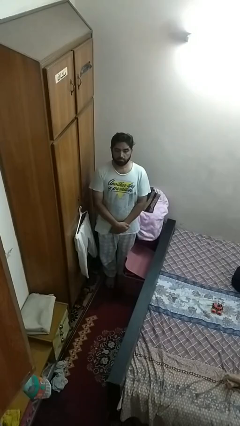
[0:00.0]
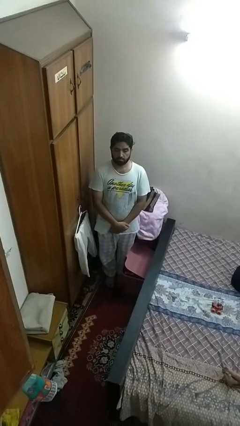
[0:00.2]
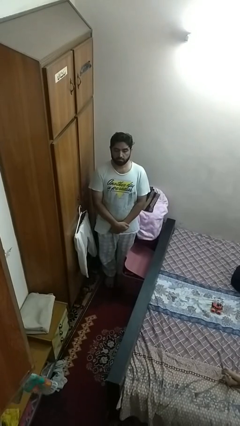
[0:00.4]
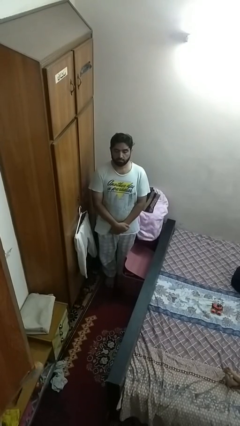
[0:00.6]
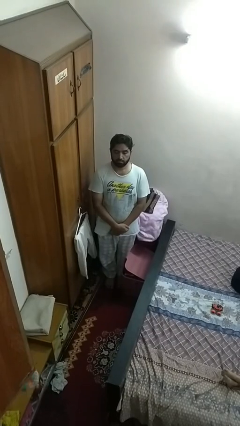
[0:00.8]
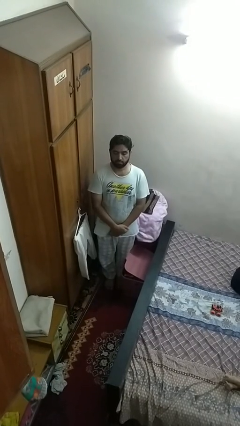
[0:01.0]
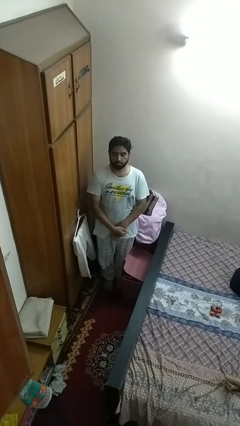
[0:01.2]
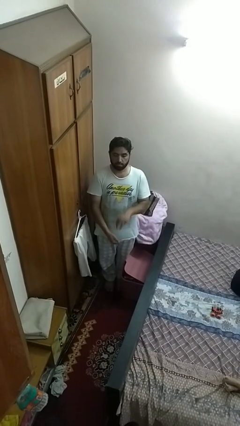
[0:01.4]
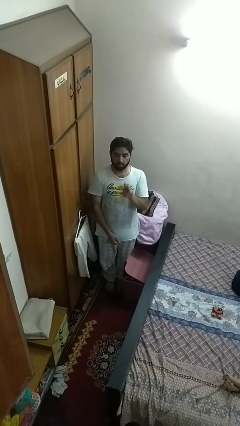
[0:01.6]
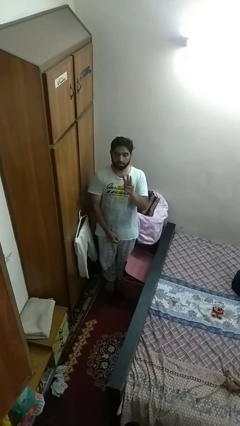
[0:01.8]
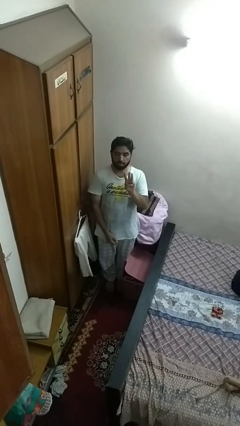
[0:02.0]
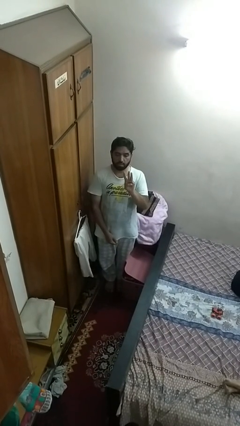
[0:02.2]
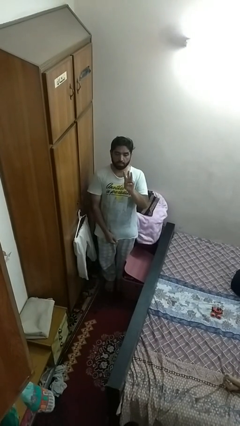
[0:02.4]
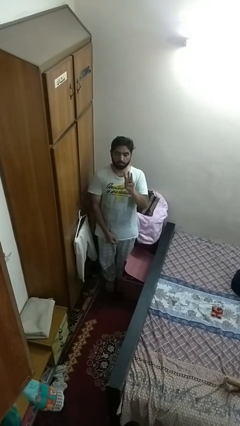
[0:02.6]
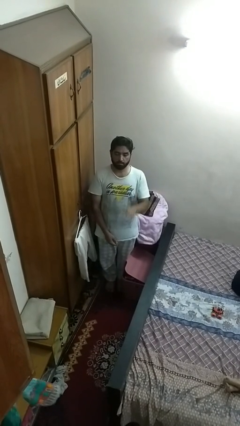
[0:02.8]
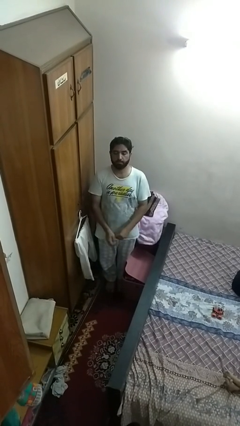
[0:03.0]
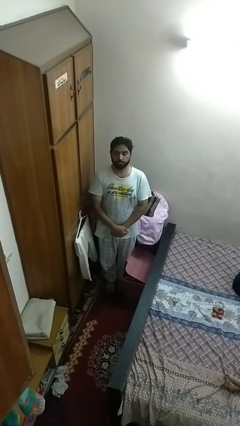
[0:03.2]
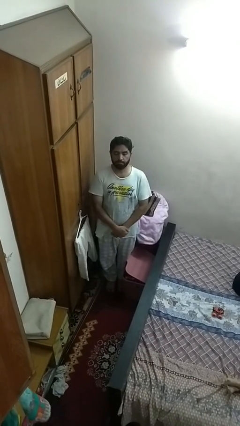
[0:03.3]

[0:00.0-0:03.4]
person gestures number three

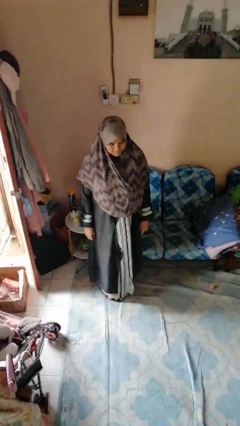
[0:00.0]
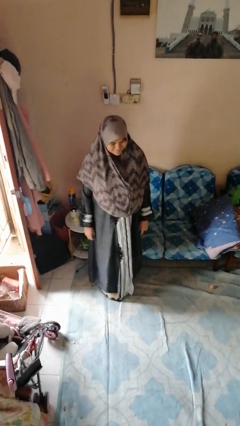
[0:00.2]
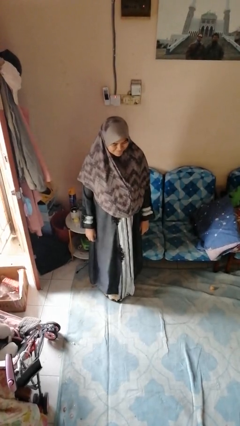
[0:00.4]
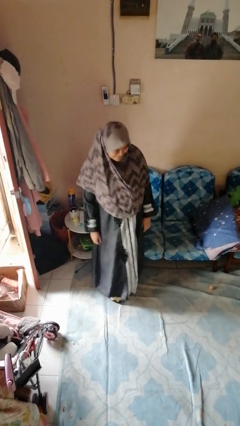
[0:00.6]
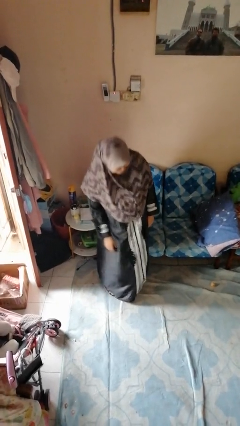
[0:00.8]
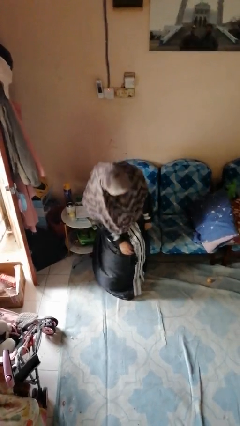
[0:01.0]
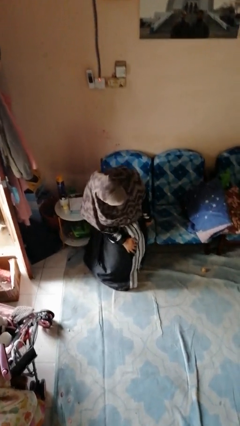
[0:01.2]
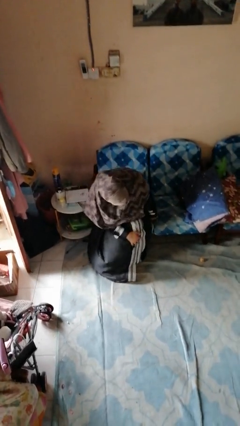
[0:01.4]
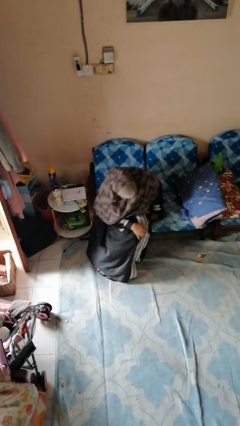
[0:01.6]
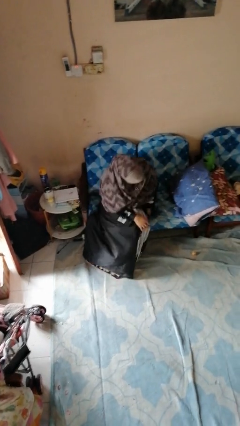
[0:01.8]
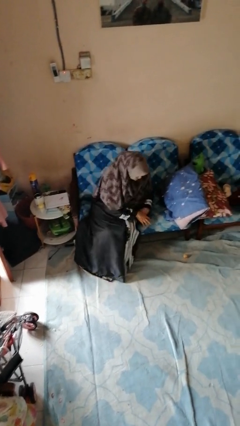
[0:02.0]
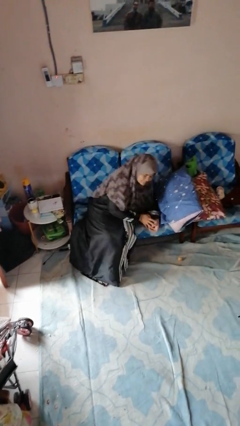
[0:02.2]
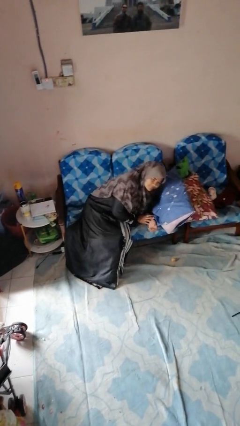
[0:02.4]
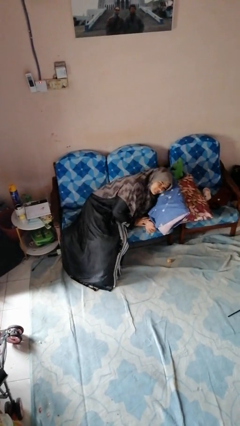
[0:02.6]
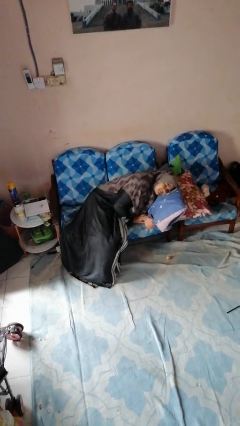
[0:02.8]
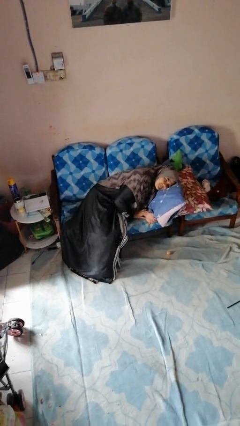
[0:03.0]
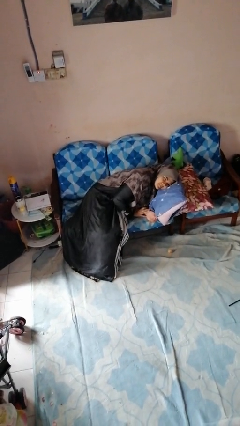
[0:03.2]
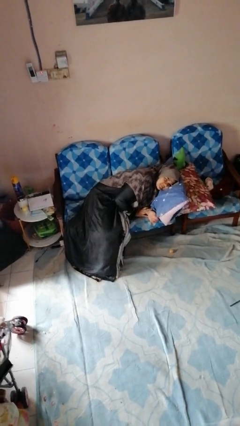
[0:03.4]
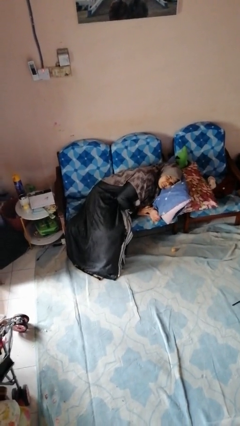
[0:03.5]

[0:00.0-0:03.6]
person lies down on couch

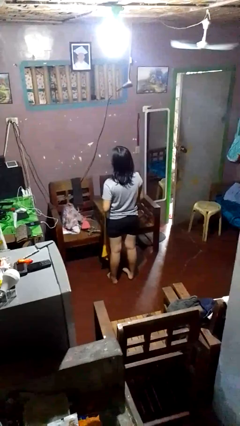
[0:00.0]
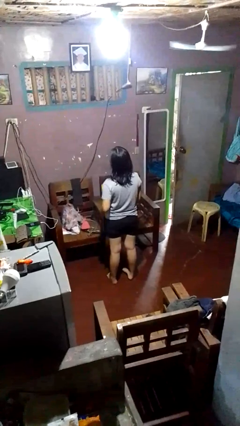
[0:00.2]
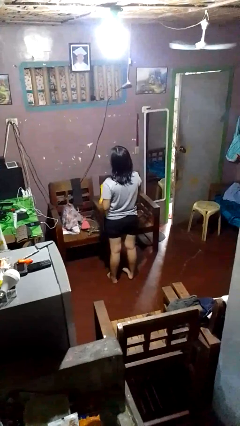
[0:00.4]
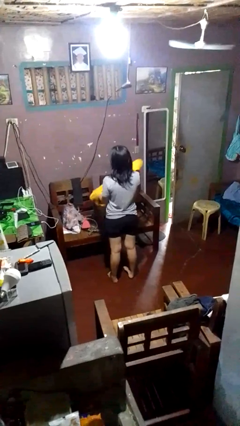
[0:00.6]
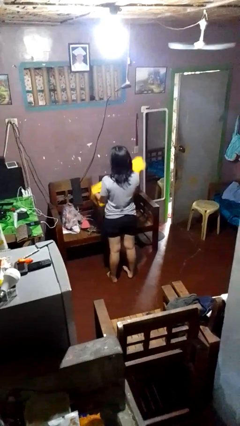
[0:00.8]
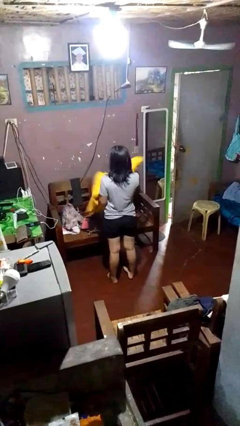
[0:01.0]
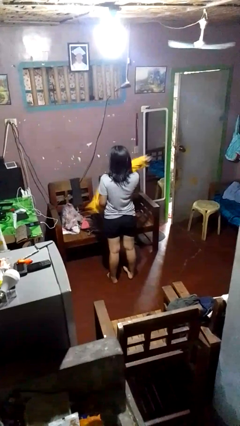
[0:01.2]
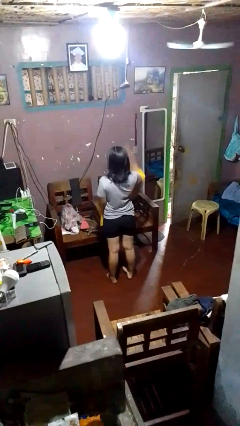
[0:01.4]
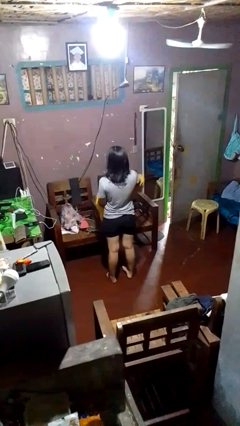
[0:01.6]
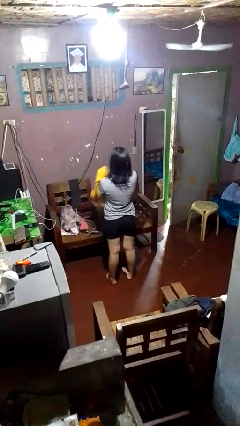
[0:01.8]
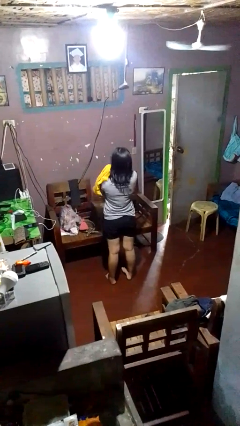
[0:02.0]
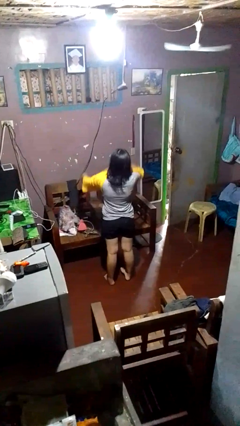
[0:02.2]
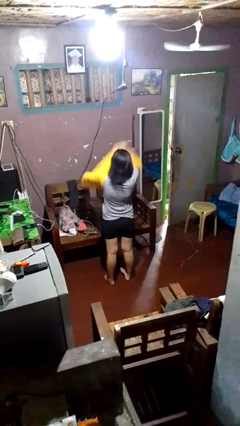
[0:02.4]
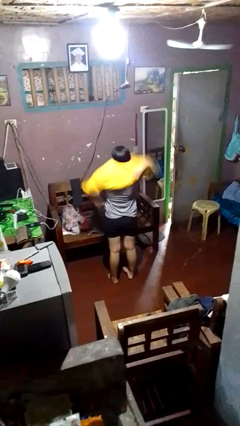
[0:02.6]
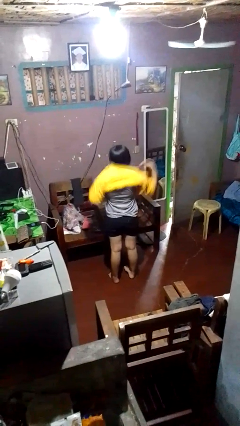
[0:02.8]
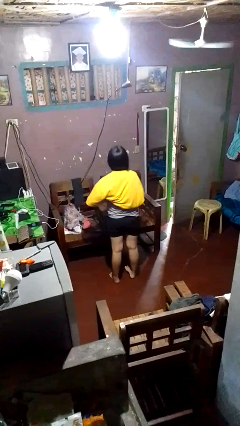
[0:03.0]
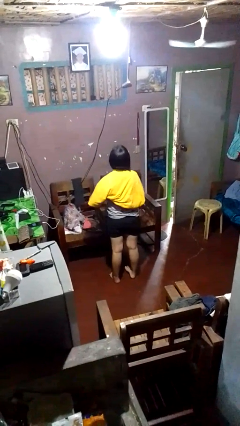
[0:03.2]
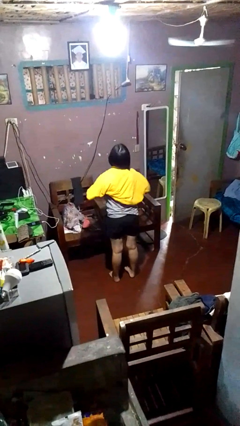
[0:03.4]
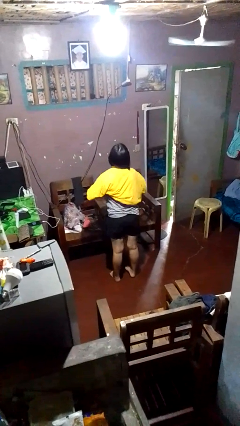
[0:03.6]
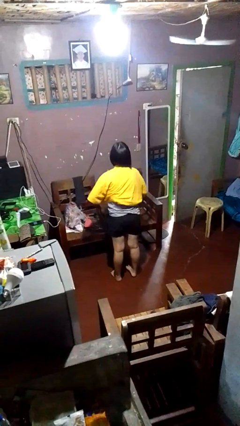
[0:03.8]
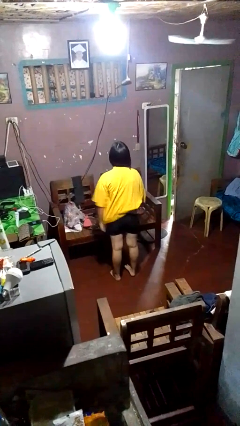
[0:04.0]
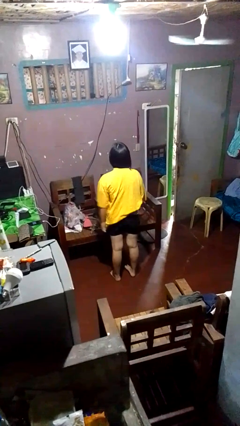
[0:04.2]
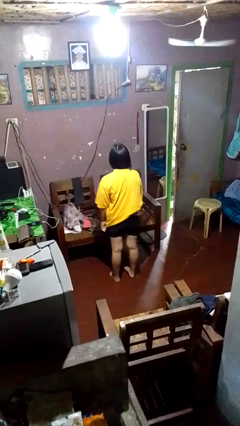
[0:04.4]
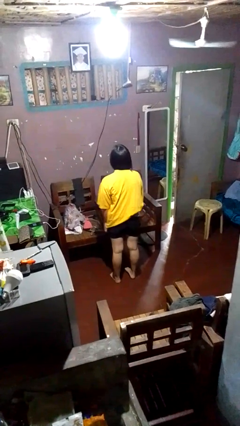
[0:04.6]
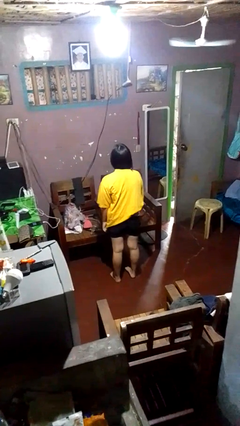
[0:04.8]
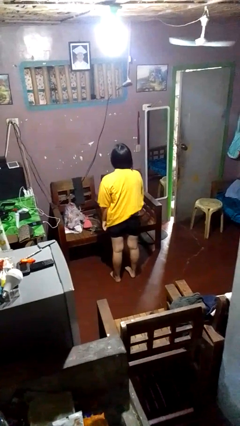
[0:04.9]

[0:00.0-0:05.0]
person puts on shirt

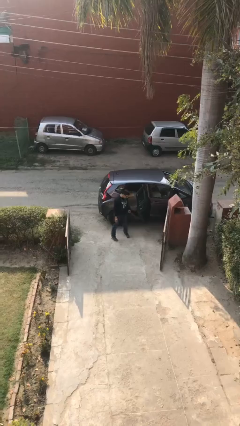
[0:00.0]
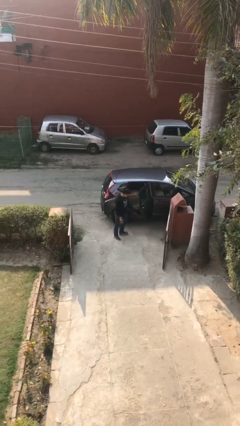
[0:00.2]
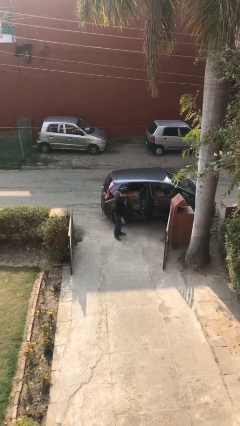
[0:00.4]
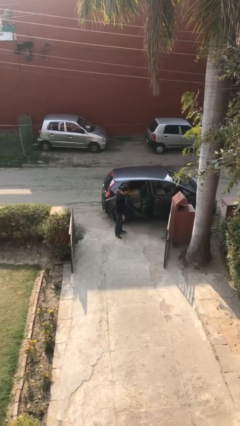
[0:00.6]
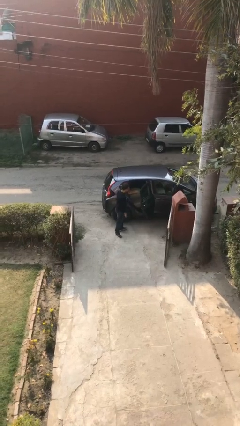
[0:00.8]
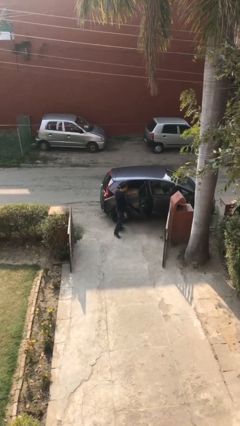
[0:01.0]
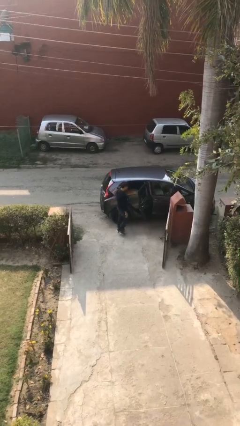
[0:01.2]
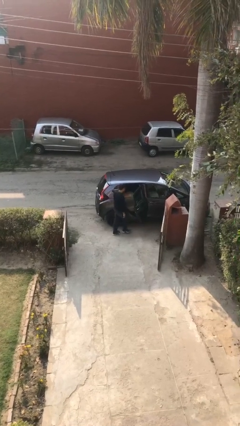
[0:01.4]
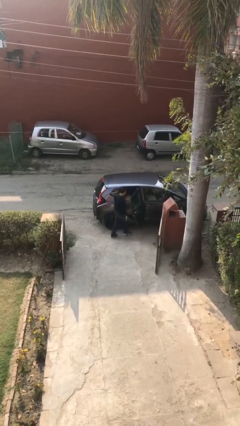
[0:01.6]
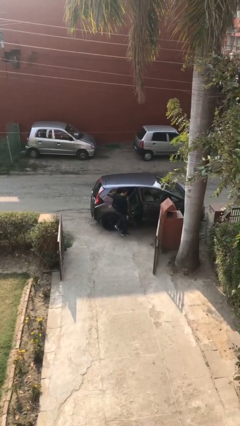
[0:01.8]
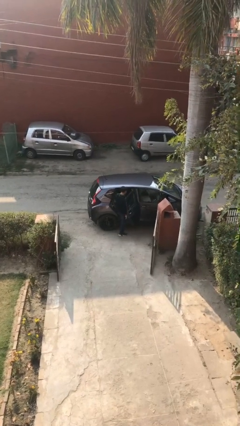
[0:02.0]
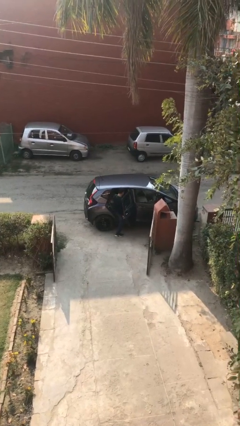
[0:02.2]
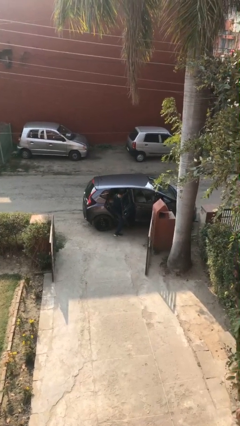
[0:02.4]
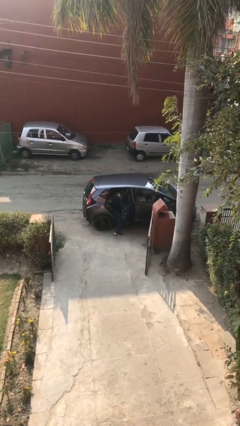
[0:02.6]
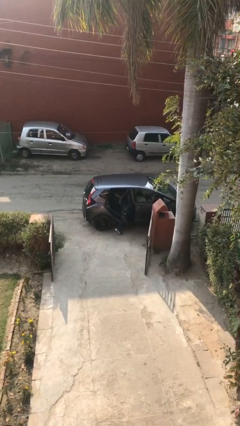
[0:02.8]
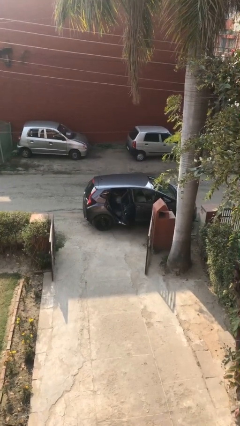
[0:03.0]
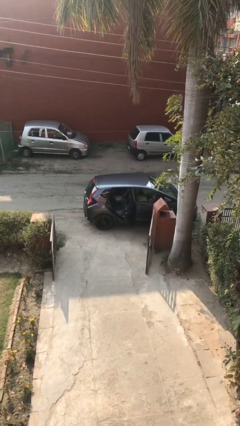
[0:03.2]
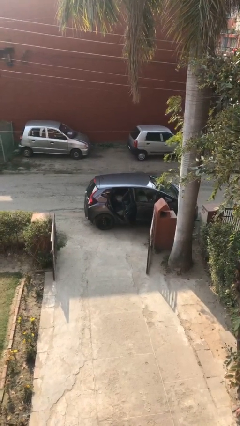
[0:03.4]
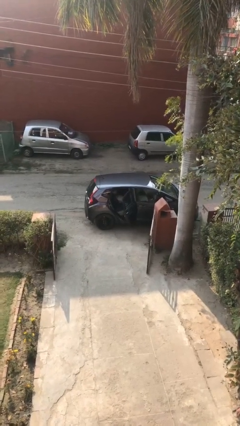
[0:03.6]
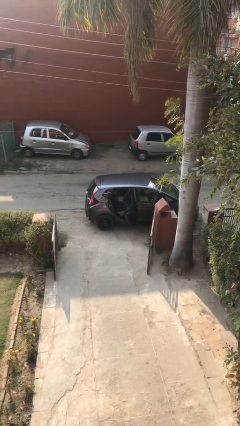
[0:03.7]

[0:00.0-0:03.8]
person enters car

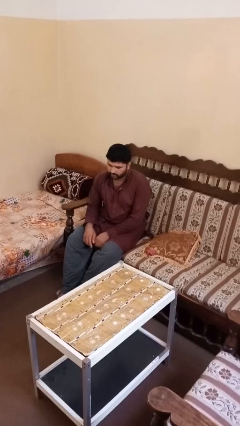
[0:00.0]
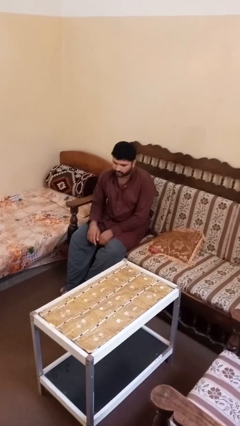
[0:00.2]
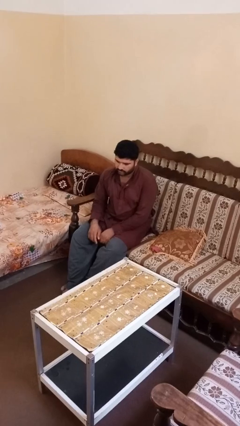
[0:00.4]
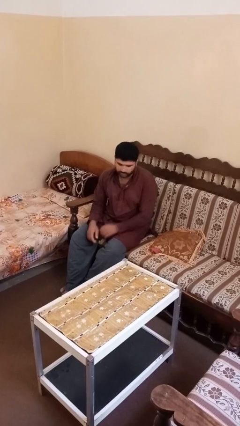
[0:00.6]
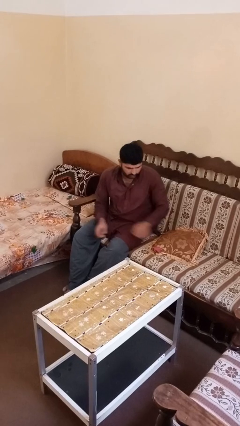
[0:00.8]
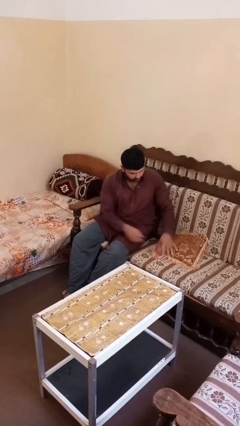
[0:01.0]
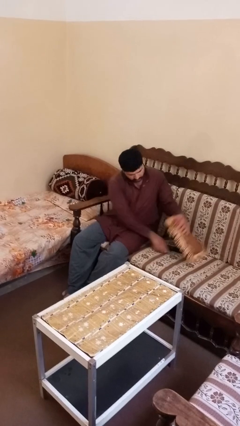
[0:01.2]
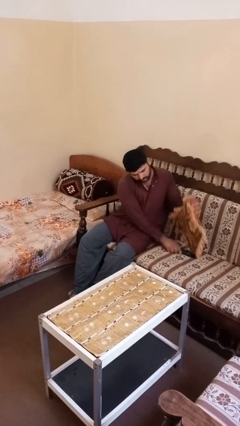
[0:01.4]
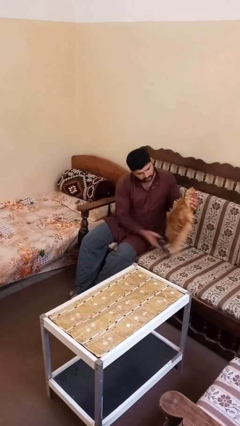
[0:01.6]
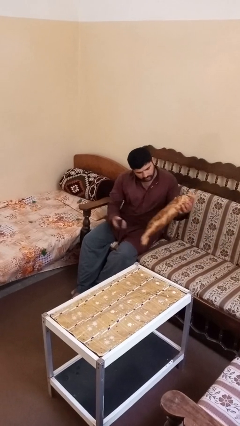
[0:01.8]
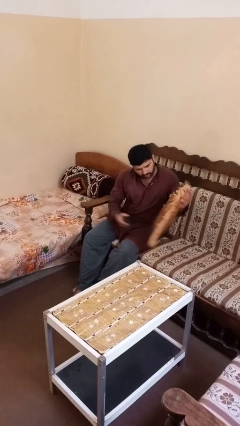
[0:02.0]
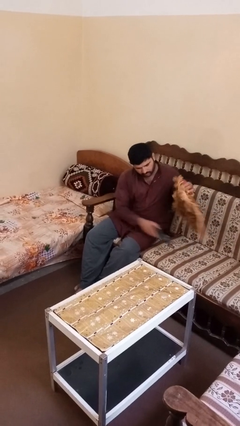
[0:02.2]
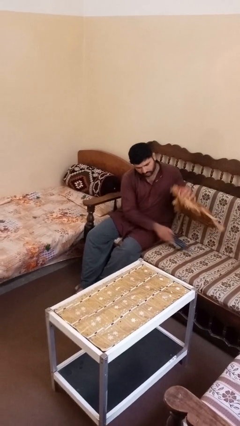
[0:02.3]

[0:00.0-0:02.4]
person searches in couch
